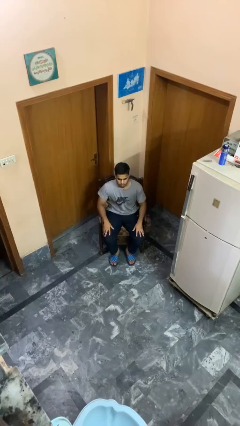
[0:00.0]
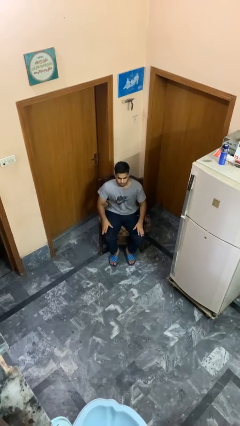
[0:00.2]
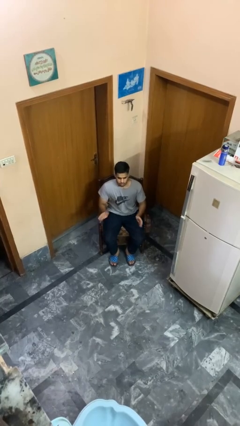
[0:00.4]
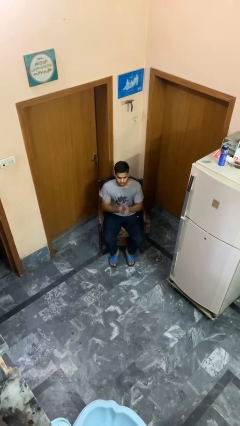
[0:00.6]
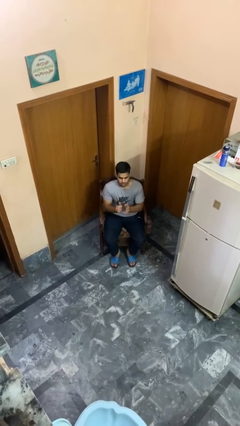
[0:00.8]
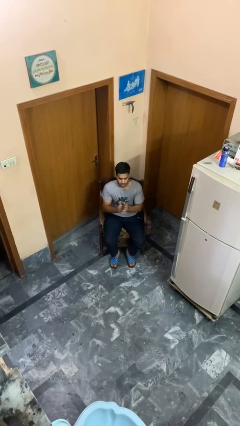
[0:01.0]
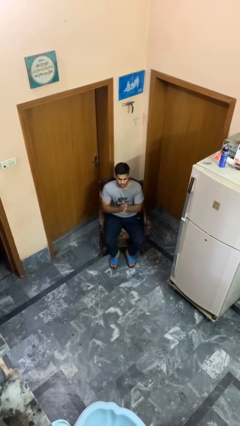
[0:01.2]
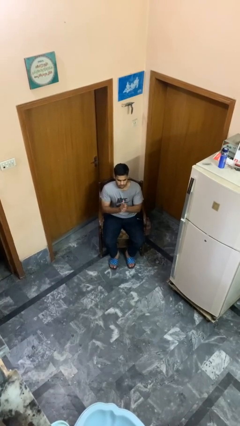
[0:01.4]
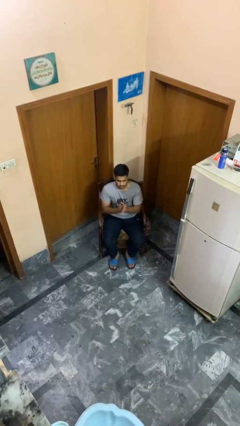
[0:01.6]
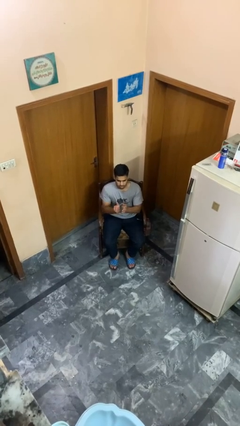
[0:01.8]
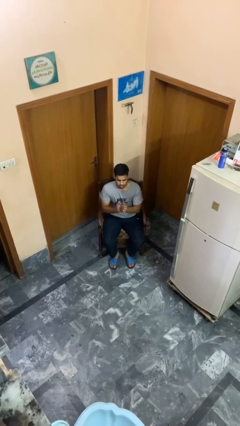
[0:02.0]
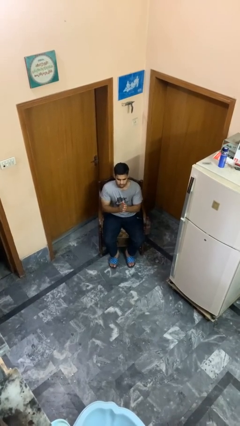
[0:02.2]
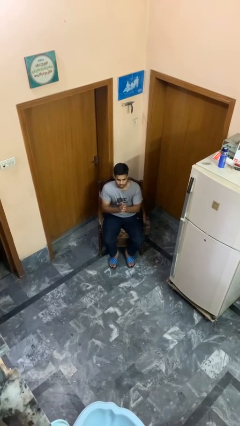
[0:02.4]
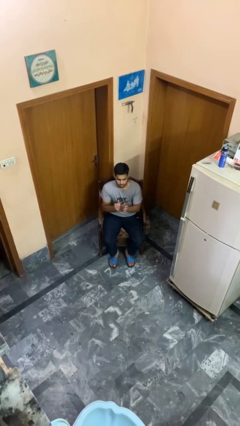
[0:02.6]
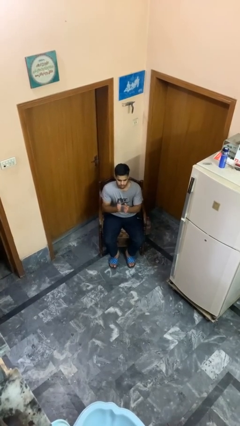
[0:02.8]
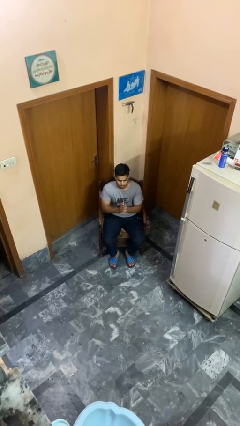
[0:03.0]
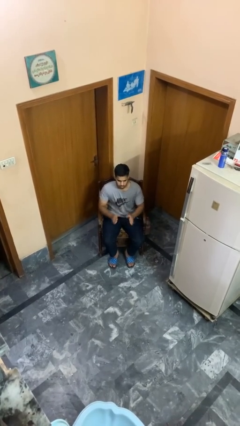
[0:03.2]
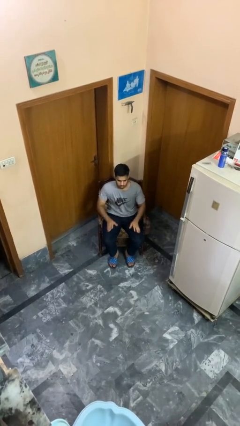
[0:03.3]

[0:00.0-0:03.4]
person claps hands

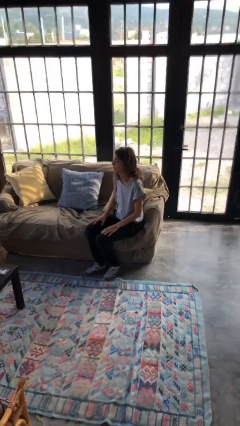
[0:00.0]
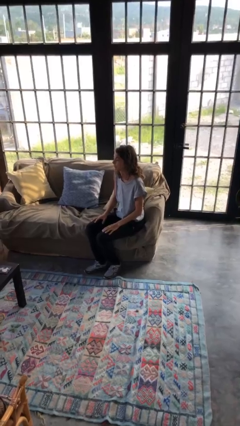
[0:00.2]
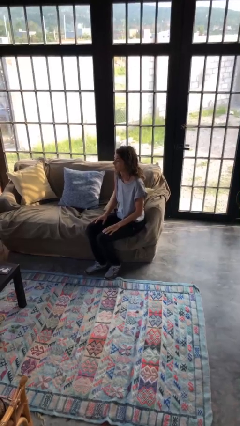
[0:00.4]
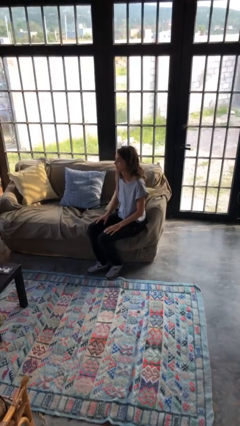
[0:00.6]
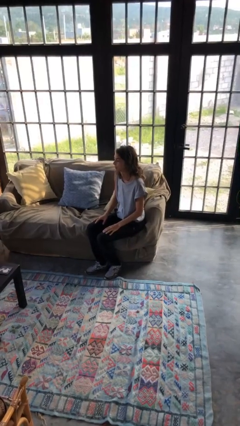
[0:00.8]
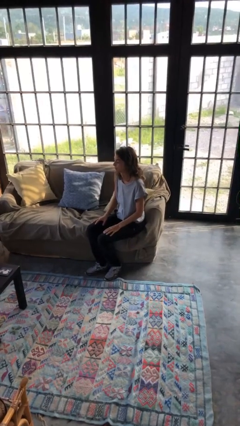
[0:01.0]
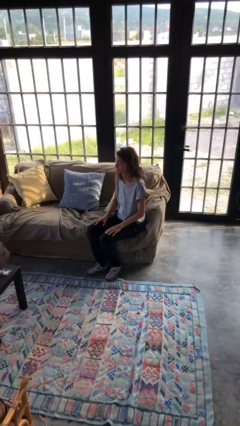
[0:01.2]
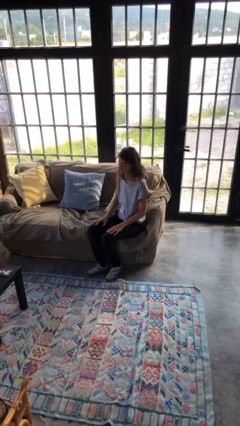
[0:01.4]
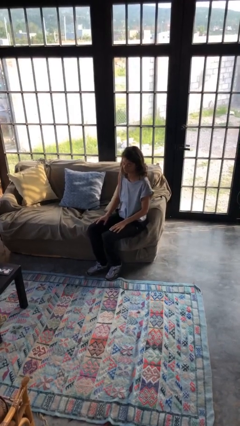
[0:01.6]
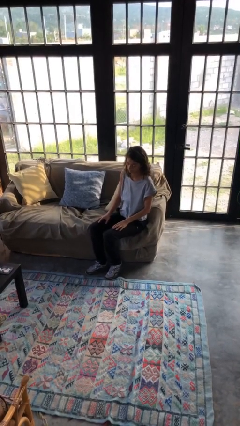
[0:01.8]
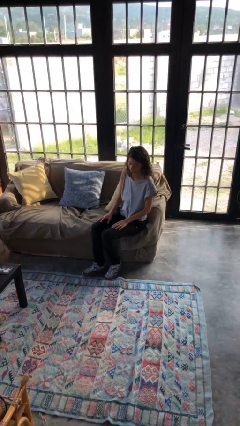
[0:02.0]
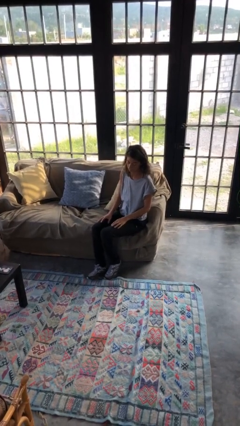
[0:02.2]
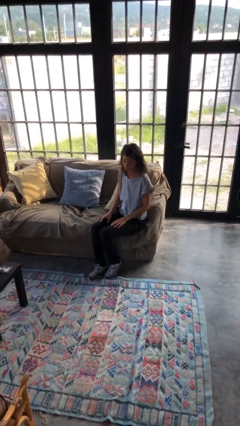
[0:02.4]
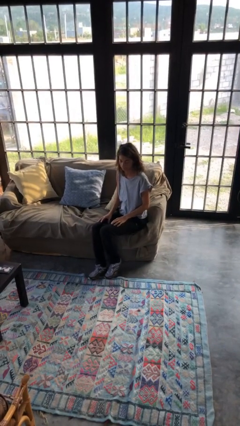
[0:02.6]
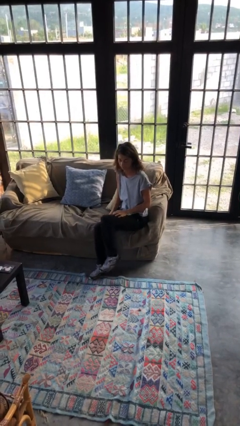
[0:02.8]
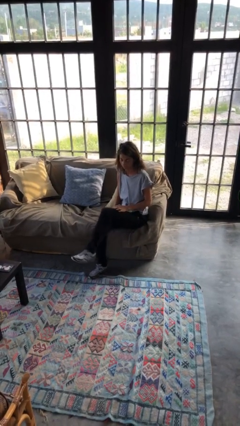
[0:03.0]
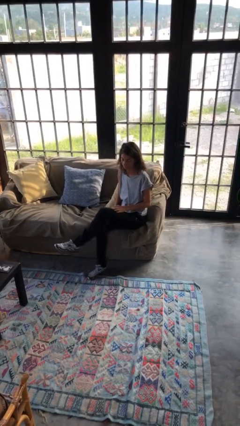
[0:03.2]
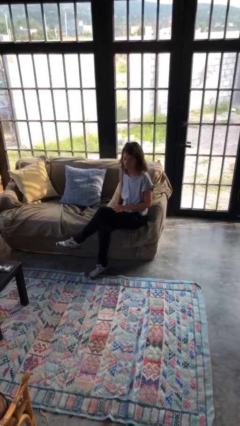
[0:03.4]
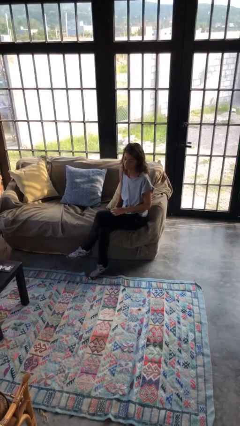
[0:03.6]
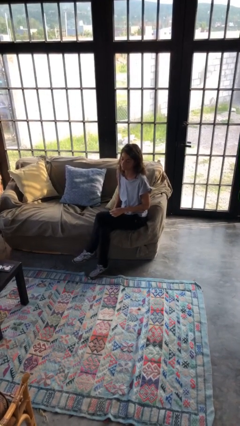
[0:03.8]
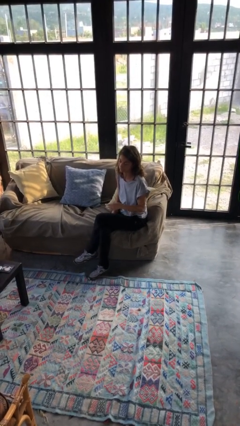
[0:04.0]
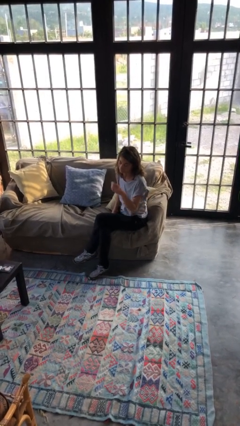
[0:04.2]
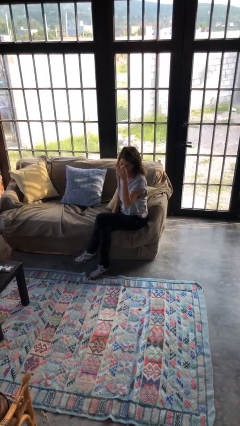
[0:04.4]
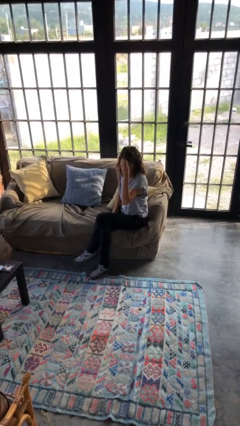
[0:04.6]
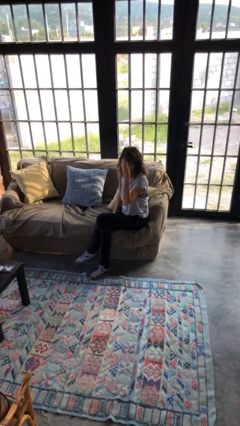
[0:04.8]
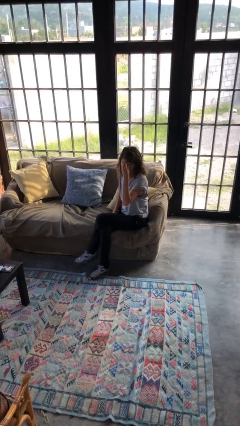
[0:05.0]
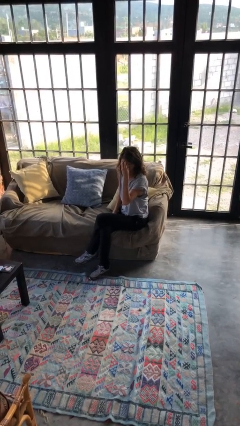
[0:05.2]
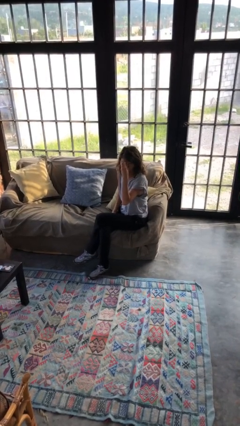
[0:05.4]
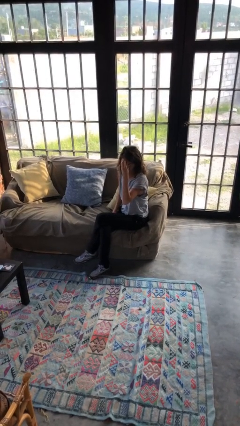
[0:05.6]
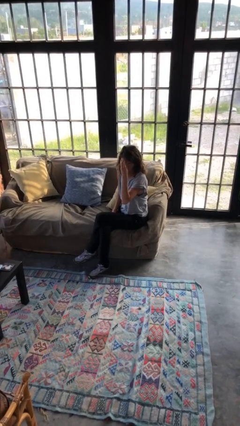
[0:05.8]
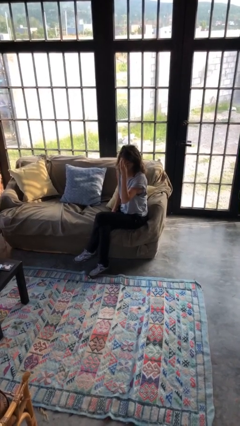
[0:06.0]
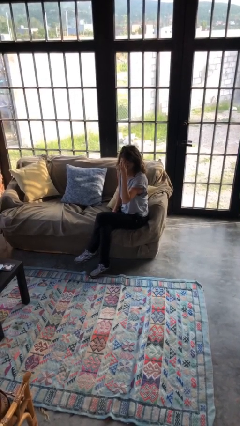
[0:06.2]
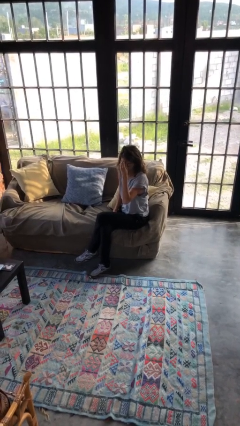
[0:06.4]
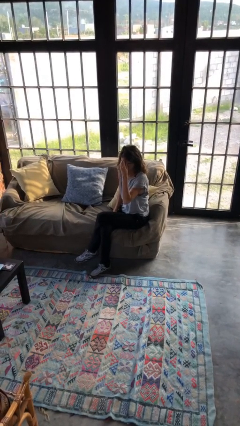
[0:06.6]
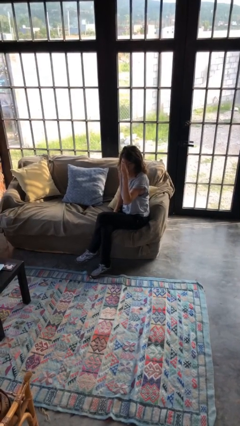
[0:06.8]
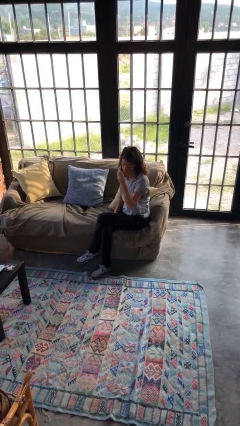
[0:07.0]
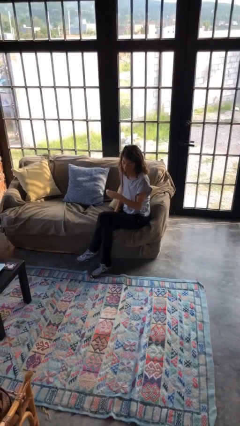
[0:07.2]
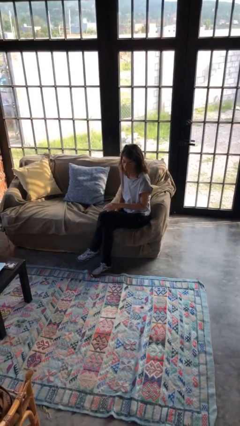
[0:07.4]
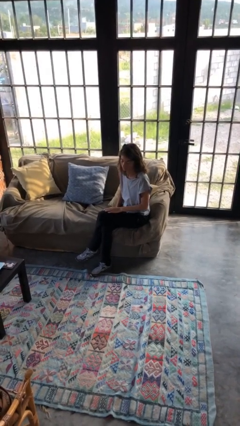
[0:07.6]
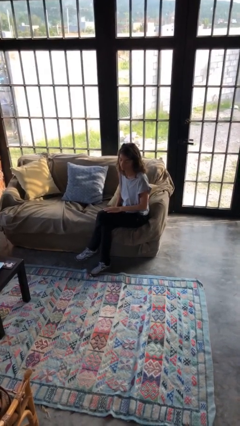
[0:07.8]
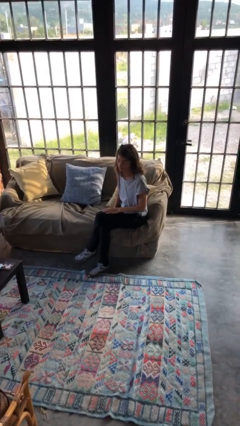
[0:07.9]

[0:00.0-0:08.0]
person scratches face

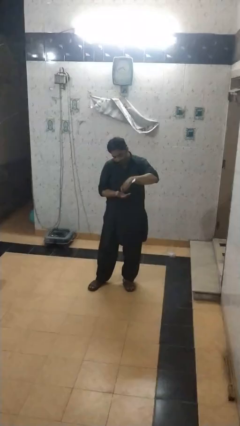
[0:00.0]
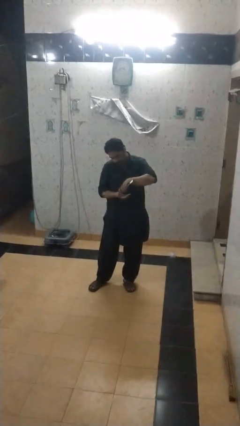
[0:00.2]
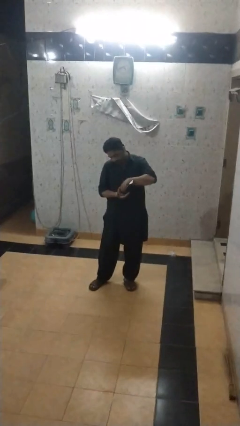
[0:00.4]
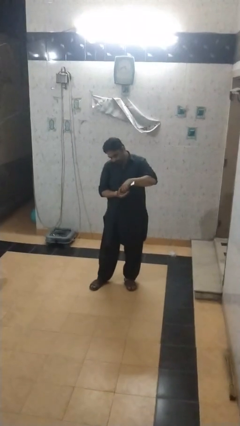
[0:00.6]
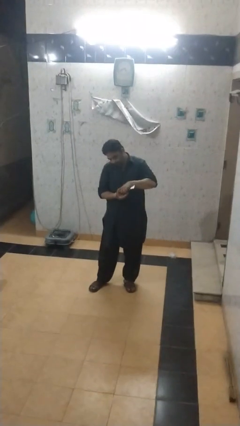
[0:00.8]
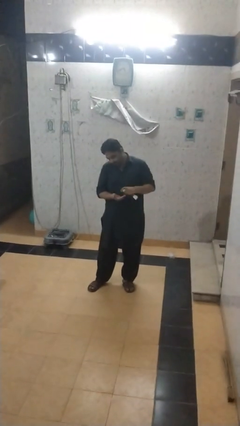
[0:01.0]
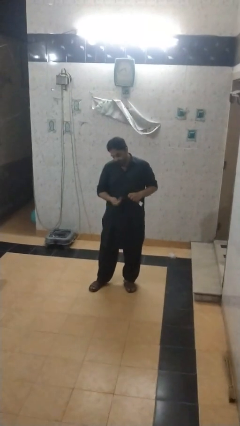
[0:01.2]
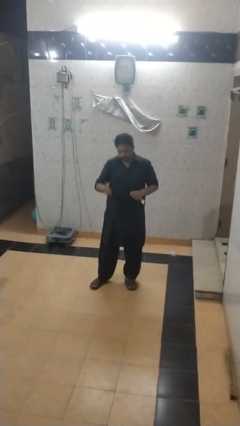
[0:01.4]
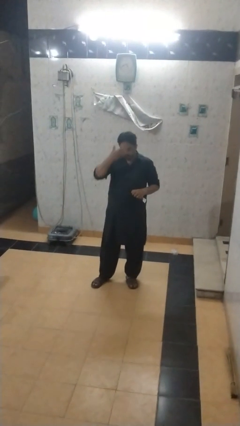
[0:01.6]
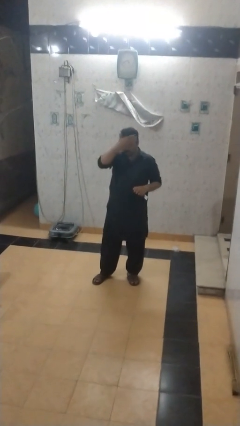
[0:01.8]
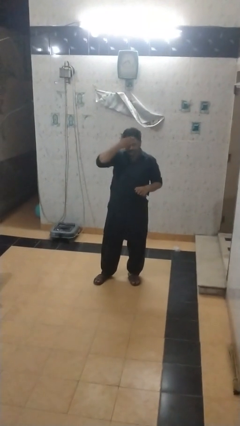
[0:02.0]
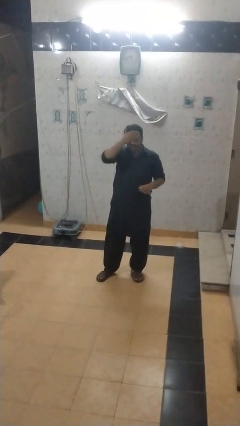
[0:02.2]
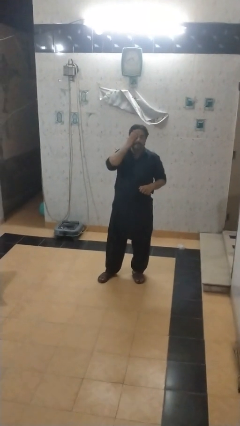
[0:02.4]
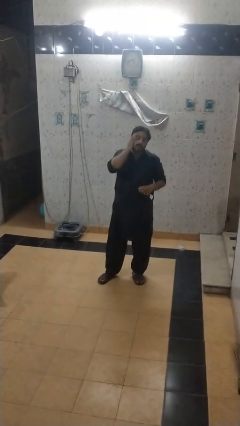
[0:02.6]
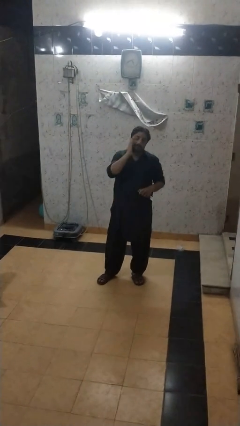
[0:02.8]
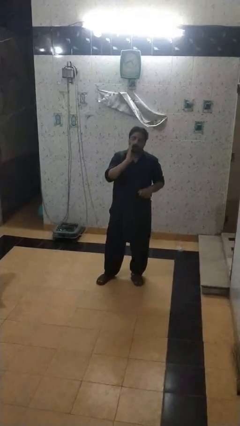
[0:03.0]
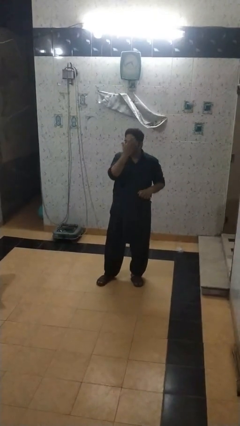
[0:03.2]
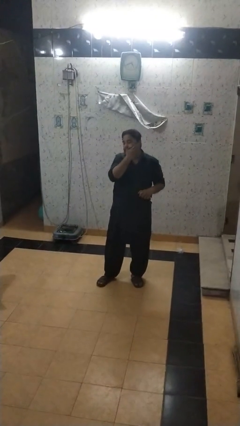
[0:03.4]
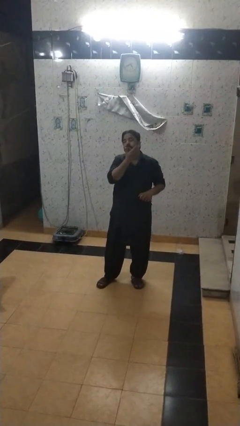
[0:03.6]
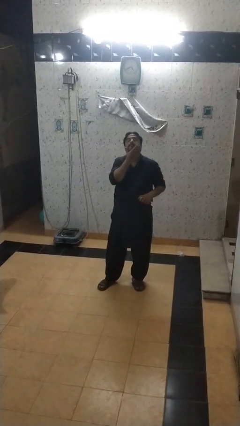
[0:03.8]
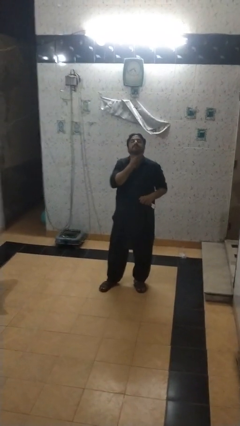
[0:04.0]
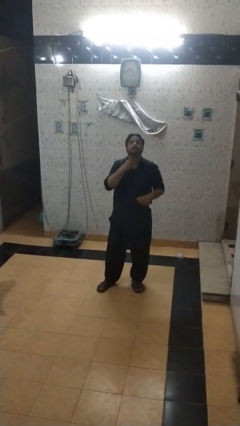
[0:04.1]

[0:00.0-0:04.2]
person applies facial moisturizer

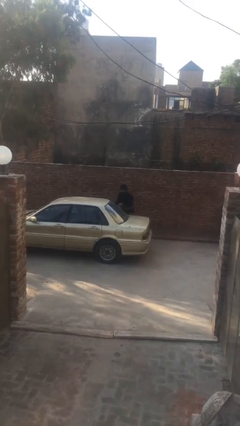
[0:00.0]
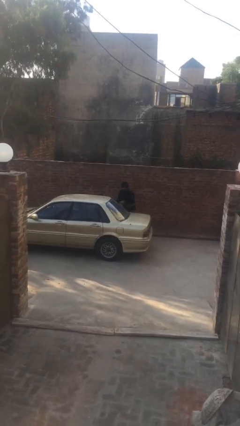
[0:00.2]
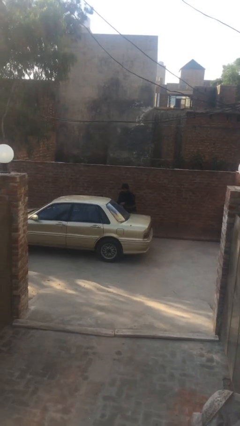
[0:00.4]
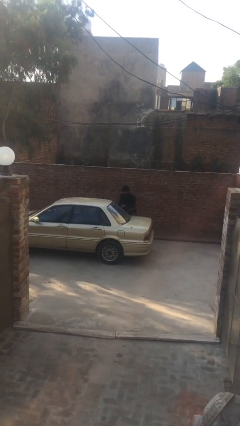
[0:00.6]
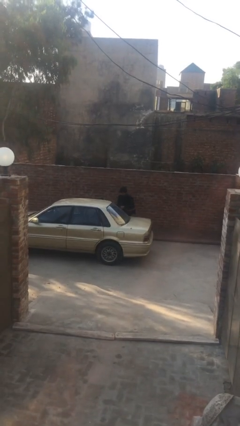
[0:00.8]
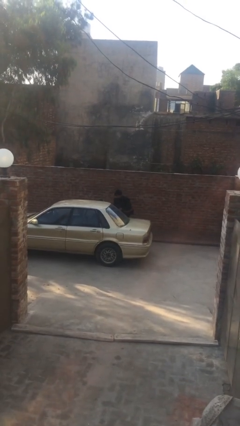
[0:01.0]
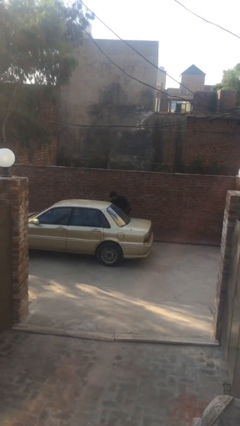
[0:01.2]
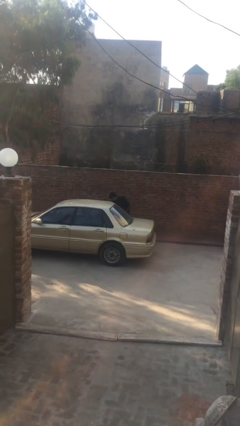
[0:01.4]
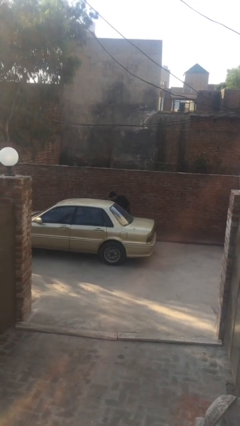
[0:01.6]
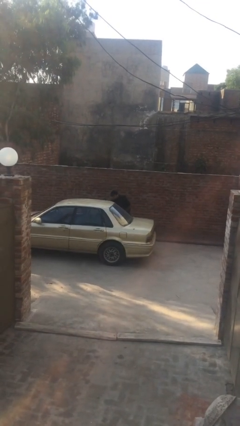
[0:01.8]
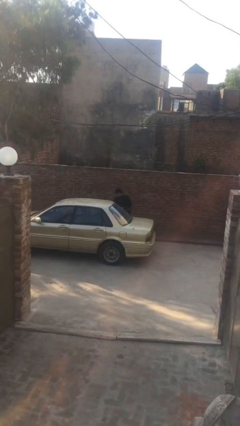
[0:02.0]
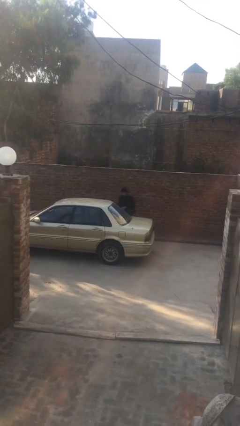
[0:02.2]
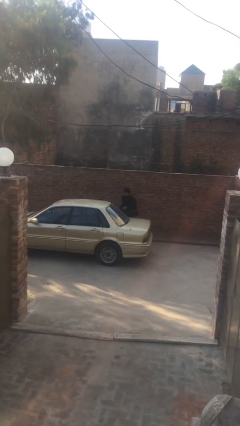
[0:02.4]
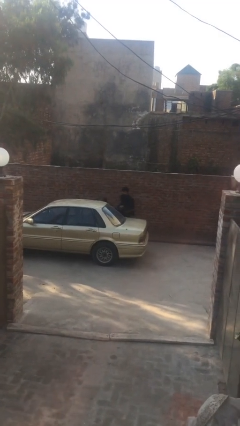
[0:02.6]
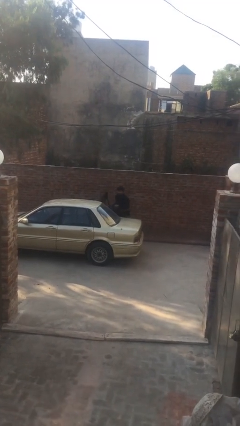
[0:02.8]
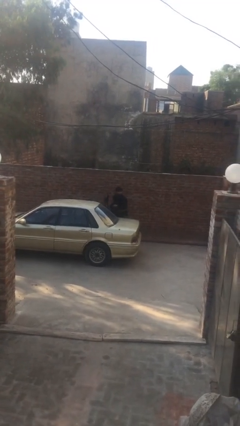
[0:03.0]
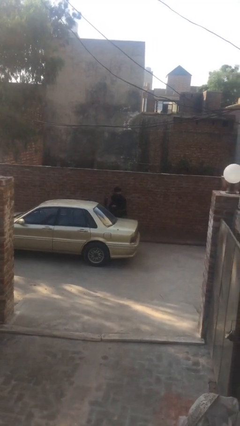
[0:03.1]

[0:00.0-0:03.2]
person unloads car
